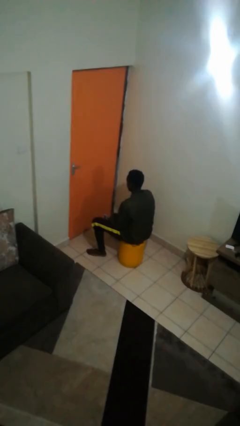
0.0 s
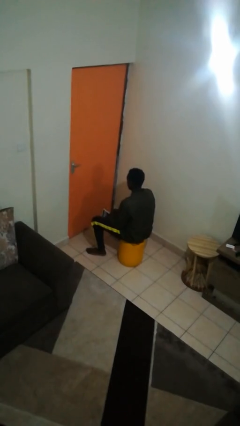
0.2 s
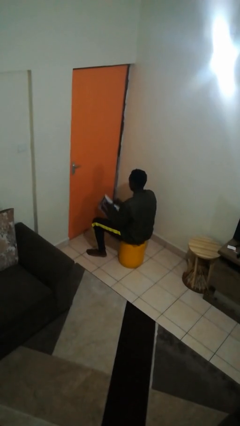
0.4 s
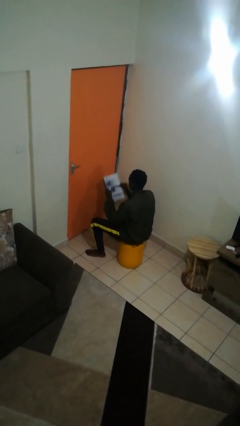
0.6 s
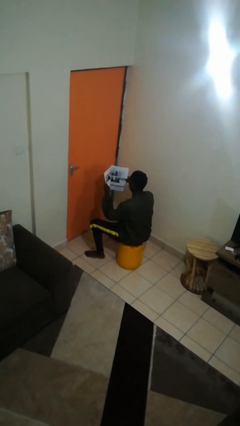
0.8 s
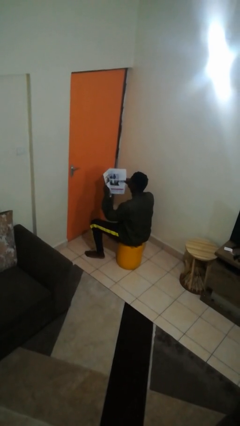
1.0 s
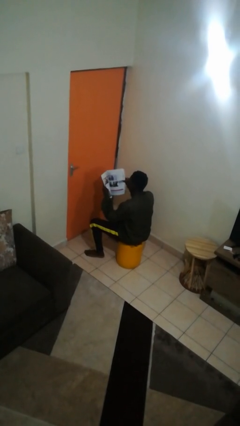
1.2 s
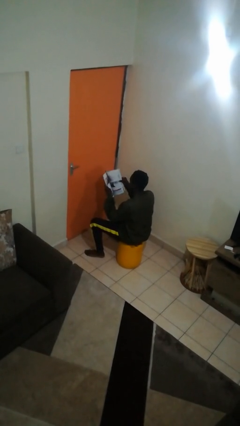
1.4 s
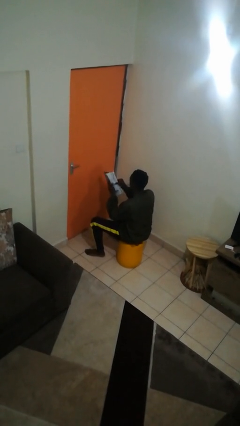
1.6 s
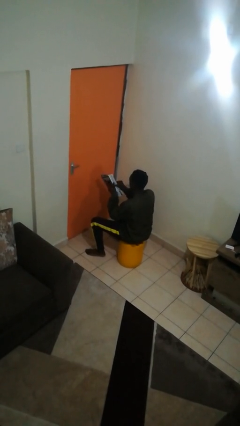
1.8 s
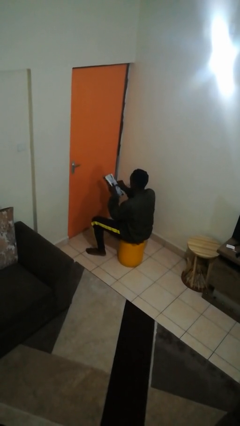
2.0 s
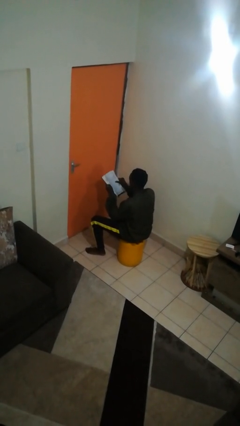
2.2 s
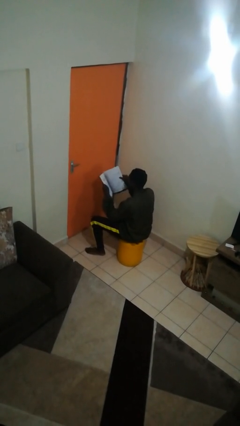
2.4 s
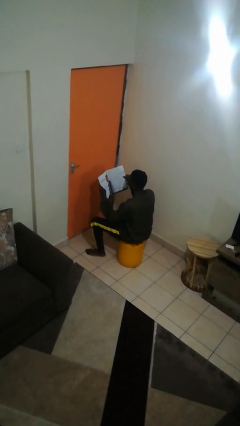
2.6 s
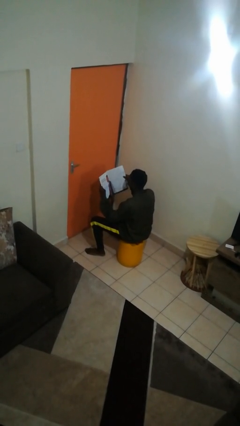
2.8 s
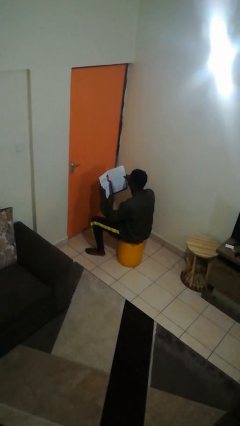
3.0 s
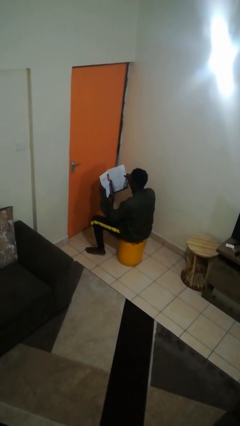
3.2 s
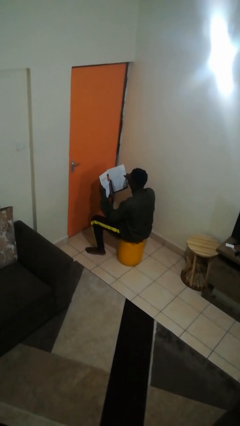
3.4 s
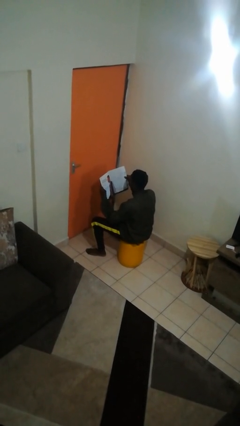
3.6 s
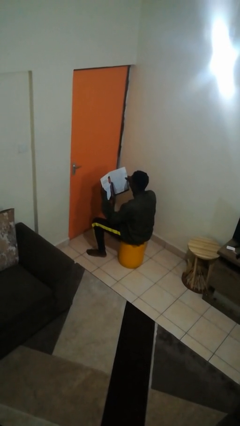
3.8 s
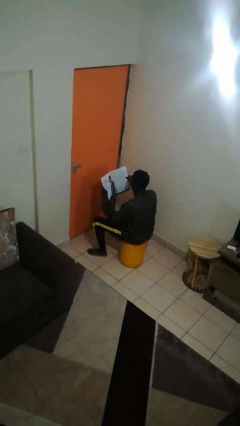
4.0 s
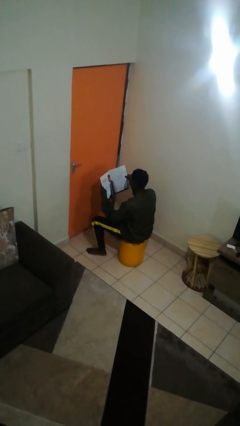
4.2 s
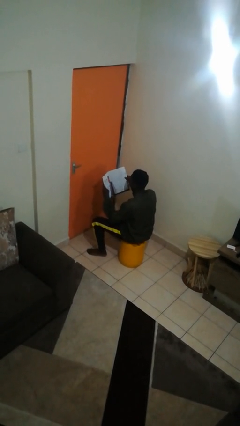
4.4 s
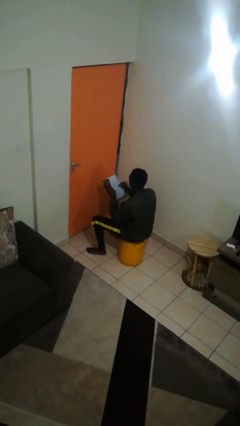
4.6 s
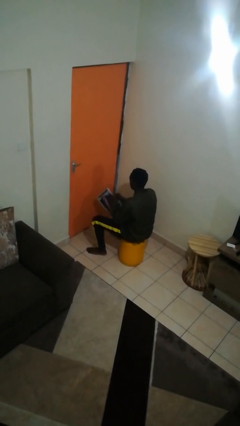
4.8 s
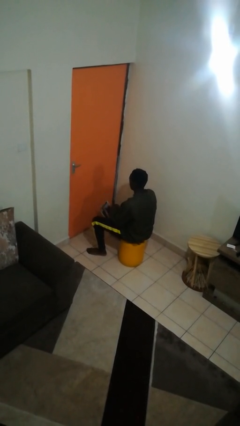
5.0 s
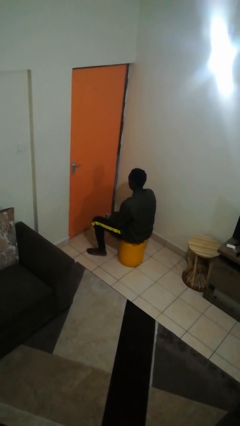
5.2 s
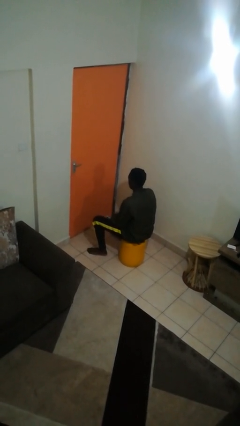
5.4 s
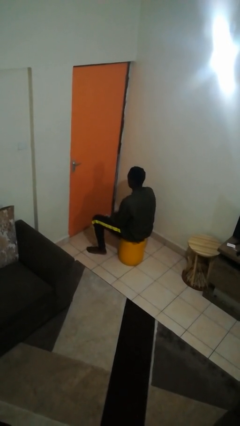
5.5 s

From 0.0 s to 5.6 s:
person reads magazine

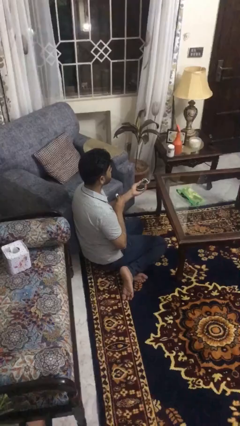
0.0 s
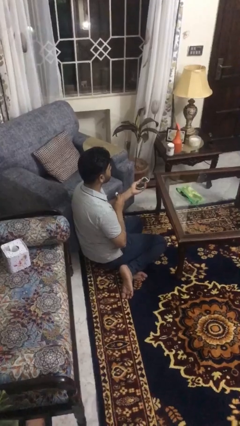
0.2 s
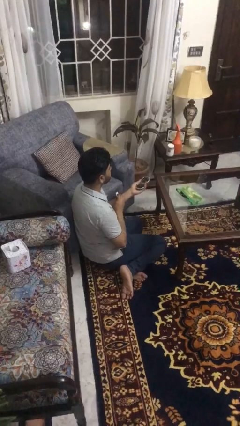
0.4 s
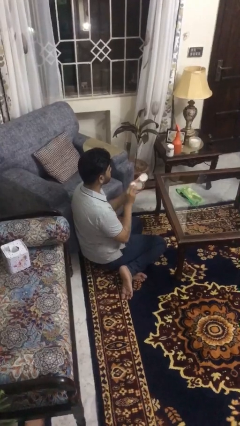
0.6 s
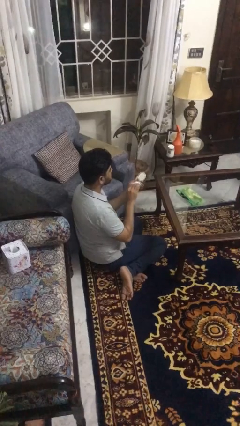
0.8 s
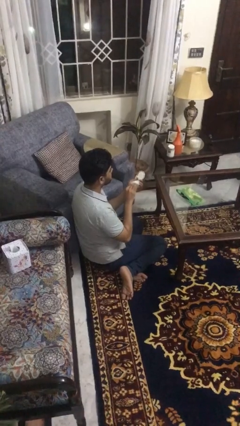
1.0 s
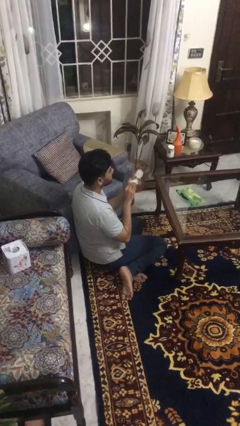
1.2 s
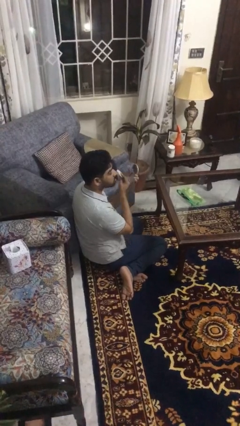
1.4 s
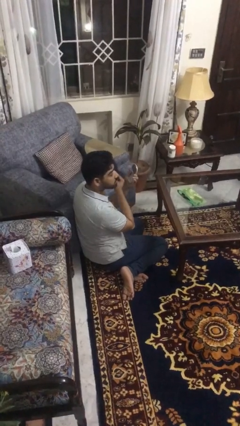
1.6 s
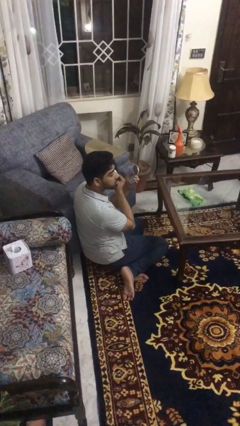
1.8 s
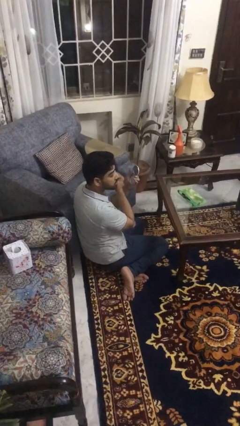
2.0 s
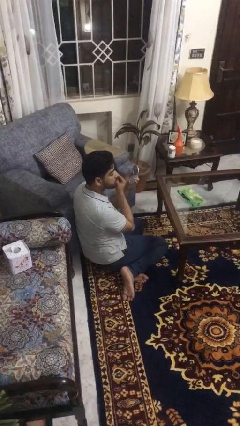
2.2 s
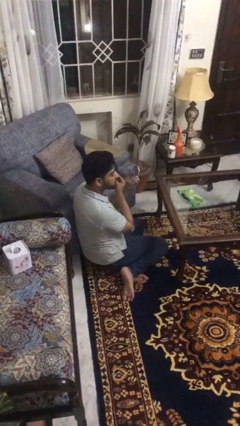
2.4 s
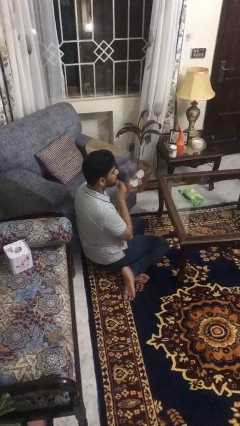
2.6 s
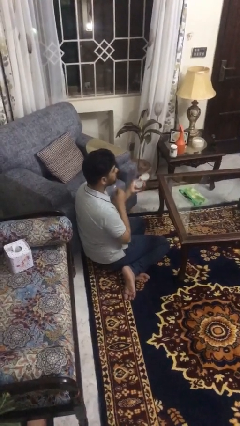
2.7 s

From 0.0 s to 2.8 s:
person applies foundation makeup

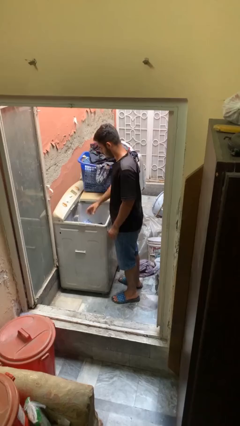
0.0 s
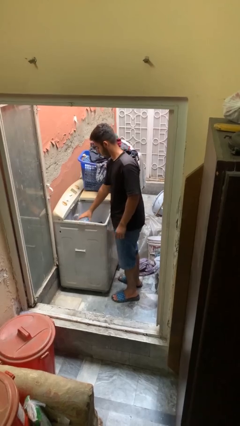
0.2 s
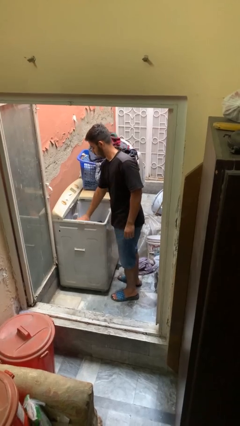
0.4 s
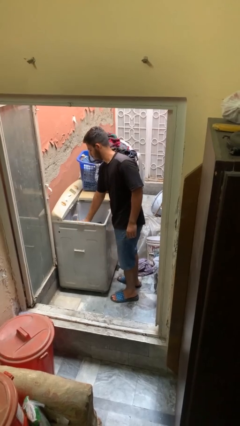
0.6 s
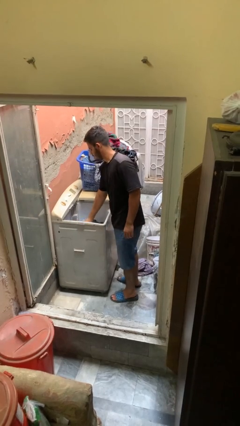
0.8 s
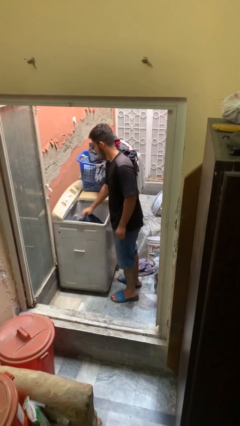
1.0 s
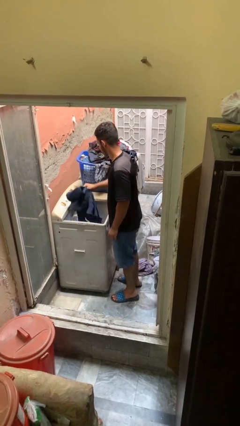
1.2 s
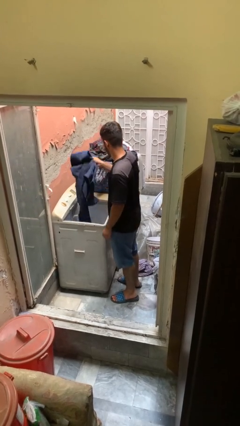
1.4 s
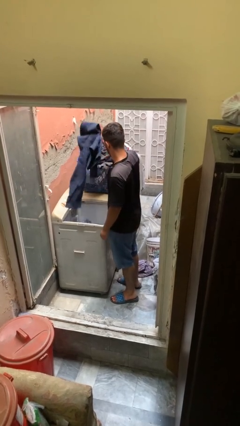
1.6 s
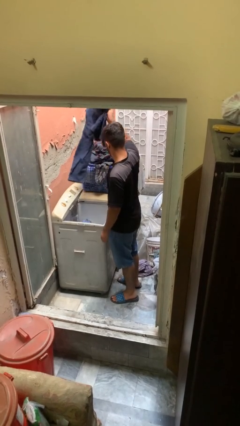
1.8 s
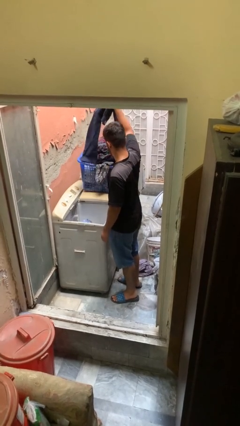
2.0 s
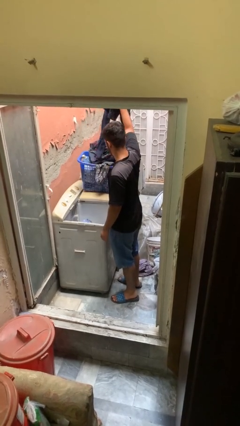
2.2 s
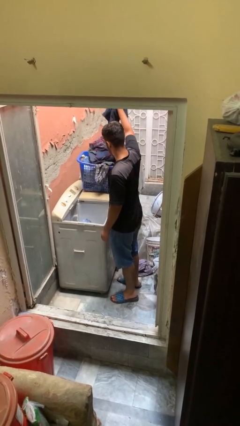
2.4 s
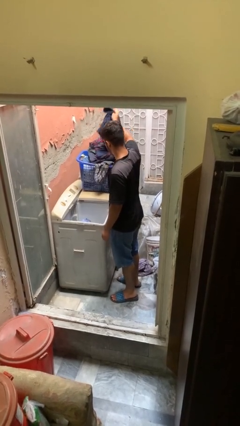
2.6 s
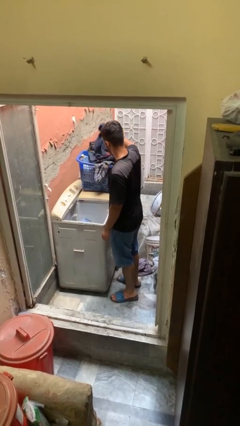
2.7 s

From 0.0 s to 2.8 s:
person loads clotheswasher

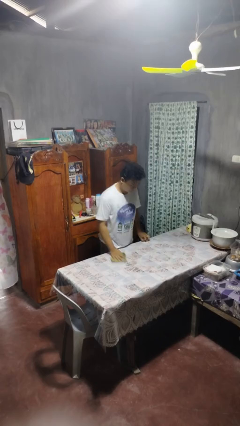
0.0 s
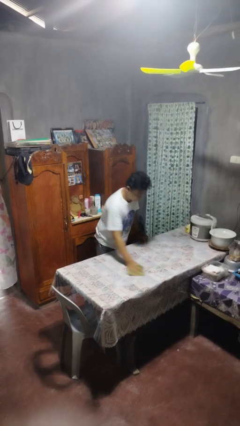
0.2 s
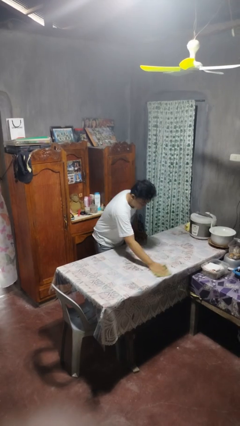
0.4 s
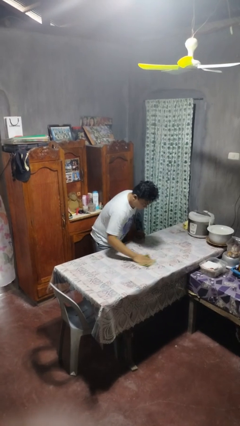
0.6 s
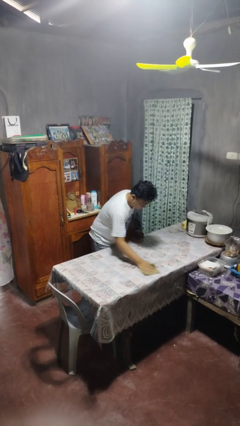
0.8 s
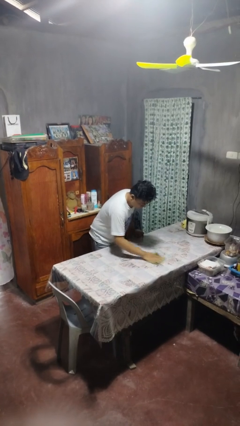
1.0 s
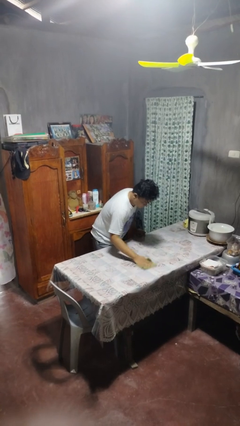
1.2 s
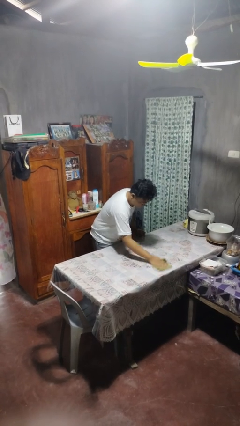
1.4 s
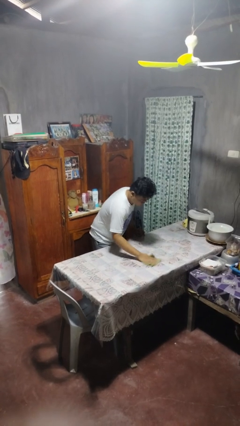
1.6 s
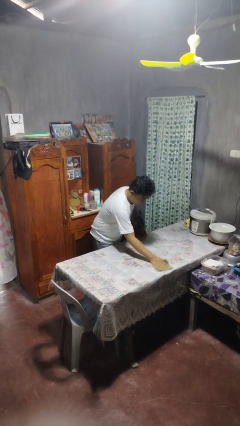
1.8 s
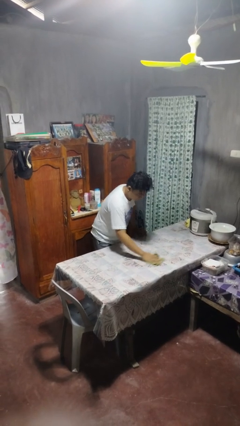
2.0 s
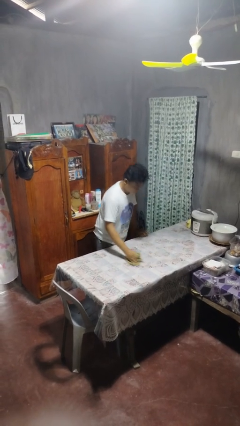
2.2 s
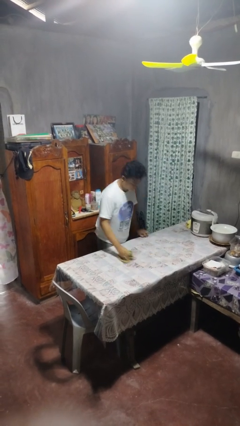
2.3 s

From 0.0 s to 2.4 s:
person cleans table with rag

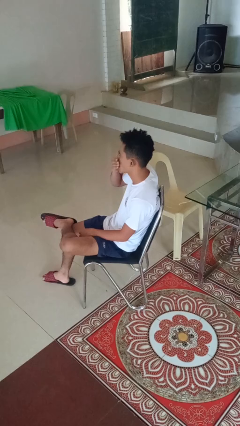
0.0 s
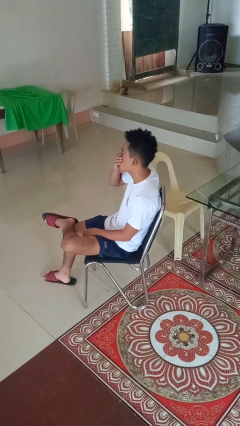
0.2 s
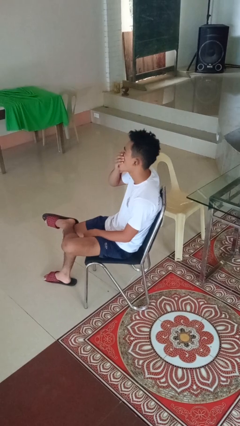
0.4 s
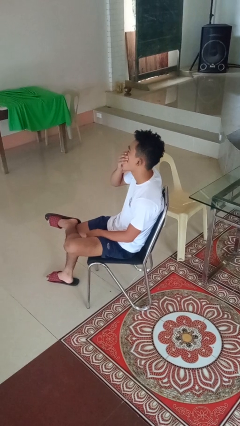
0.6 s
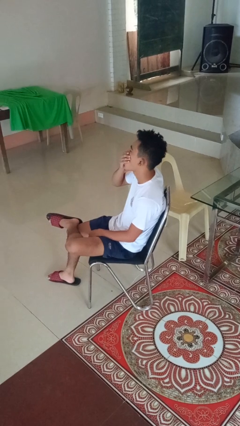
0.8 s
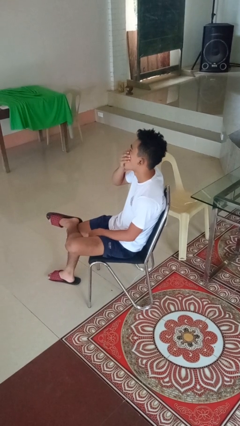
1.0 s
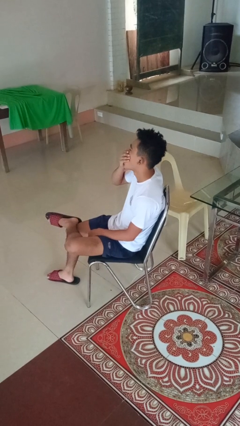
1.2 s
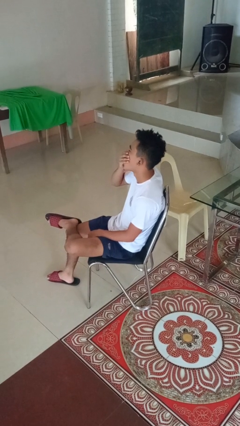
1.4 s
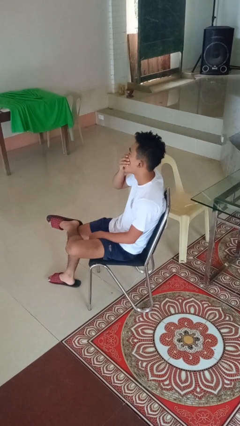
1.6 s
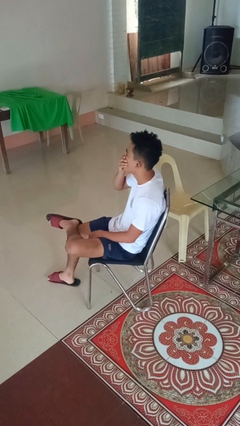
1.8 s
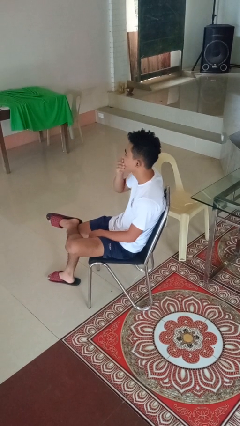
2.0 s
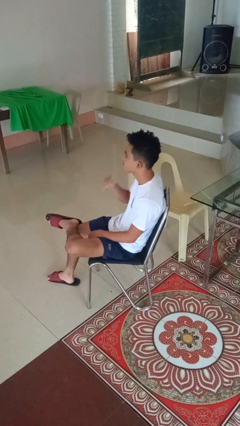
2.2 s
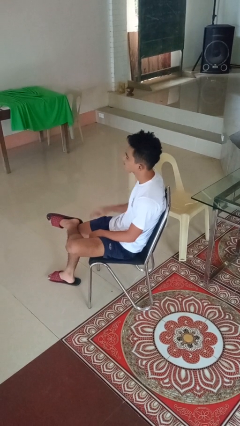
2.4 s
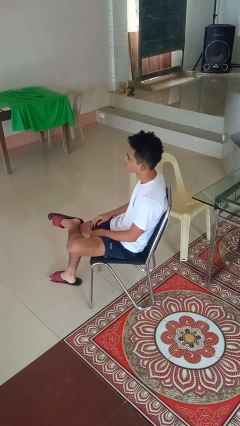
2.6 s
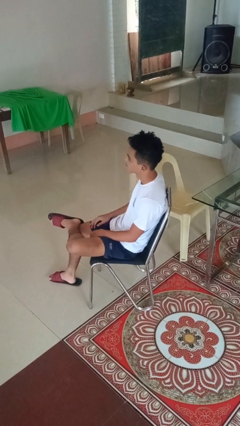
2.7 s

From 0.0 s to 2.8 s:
person yawns

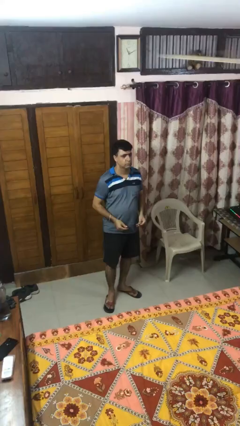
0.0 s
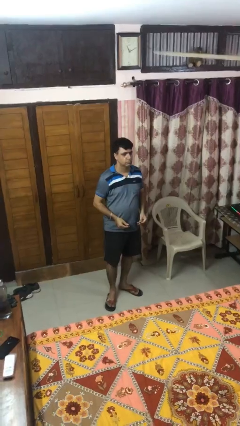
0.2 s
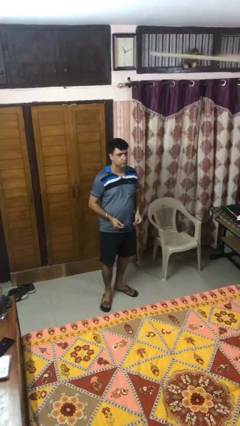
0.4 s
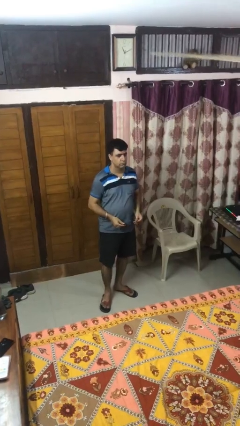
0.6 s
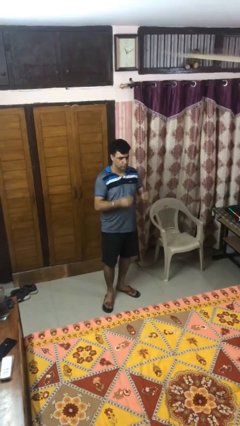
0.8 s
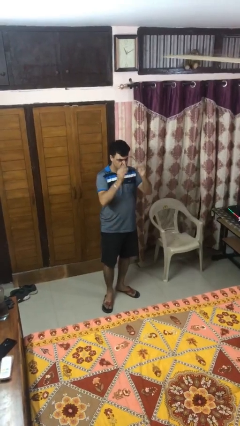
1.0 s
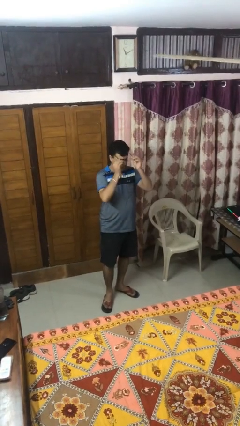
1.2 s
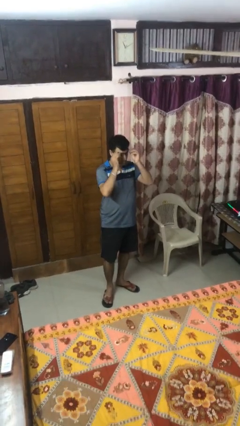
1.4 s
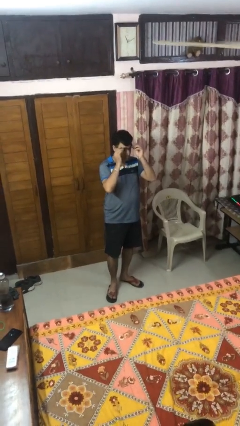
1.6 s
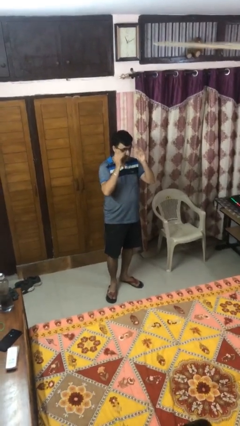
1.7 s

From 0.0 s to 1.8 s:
person puts on glasses
